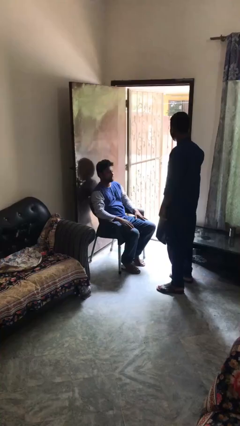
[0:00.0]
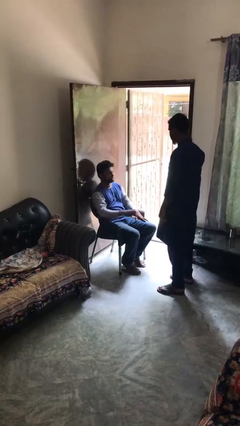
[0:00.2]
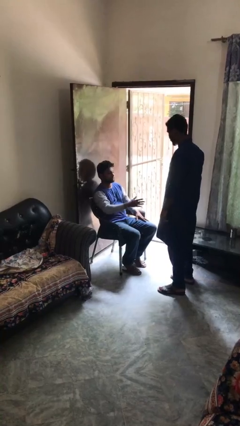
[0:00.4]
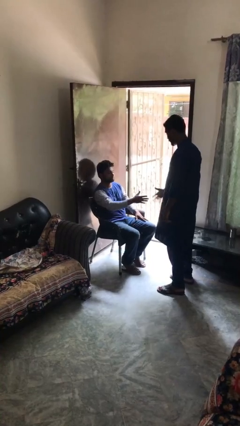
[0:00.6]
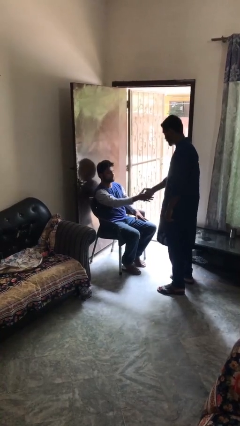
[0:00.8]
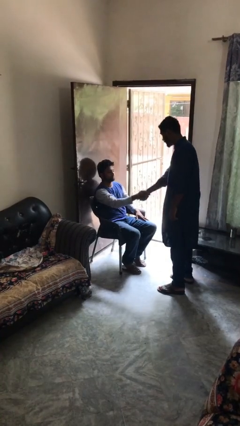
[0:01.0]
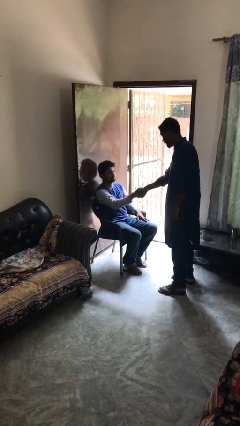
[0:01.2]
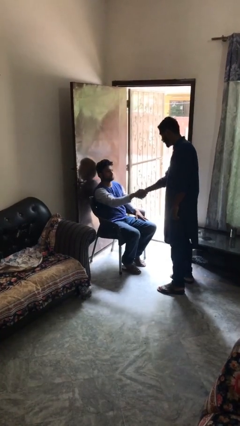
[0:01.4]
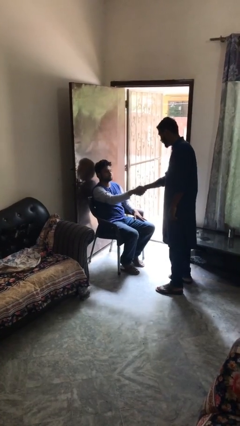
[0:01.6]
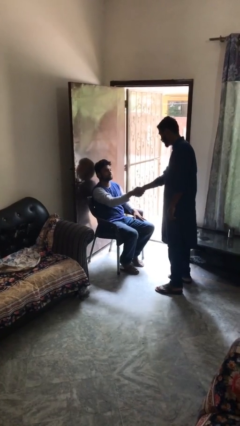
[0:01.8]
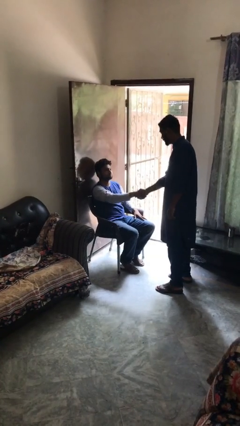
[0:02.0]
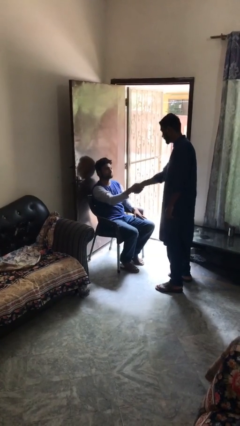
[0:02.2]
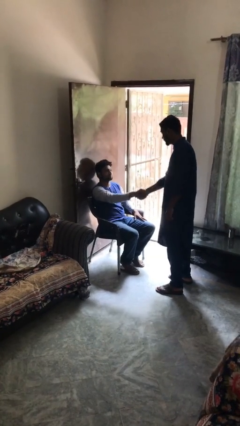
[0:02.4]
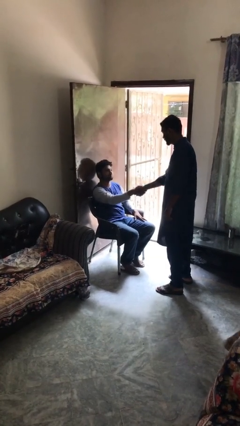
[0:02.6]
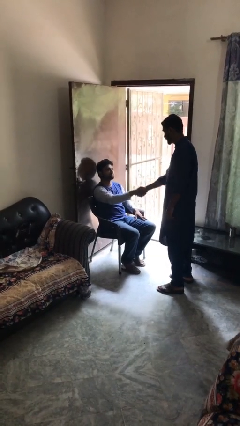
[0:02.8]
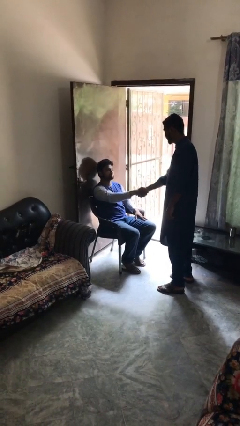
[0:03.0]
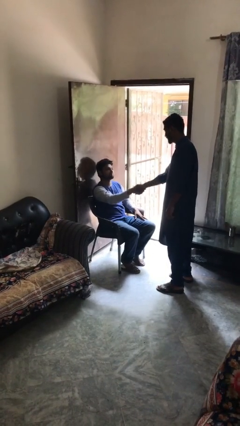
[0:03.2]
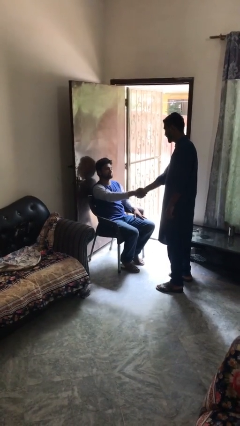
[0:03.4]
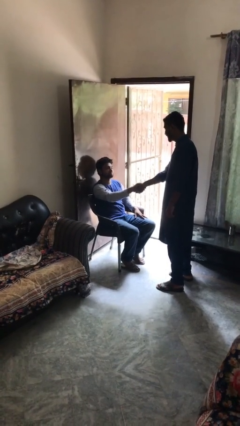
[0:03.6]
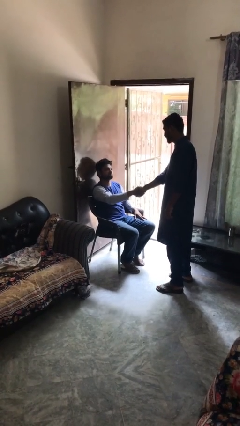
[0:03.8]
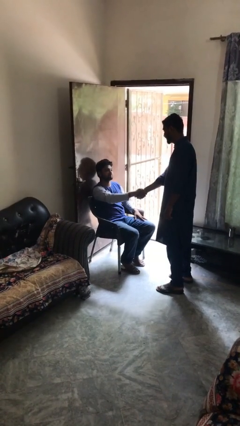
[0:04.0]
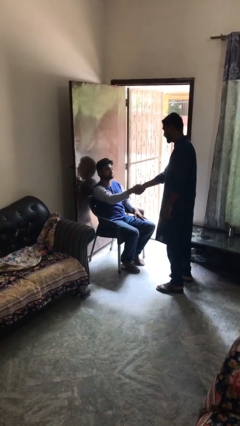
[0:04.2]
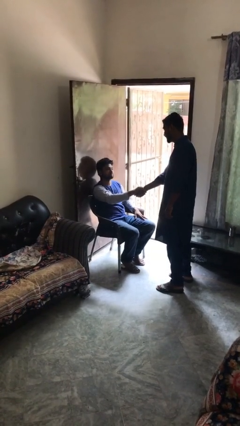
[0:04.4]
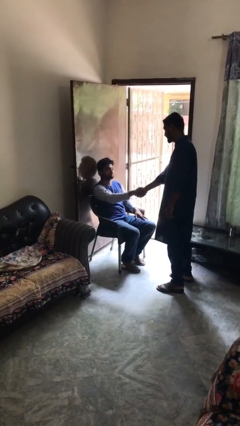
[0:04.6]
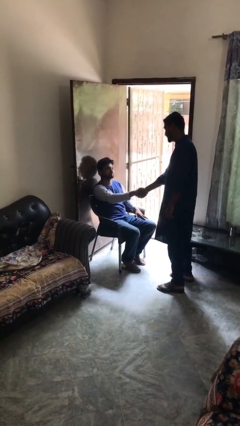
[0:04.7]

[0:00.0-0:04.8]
person holds hand

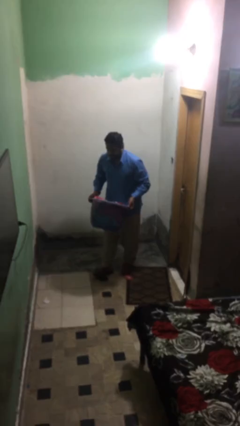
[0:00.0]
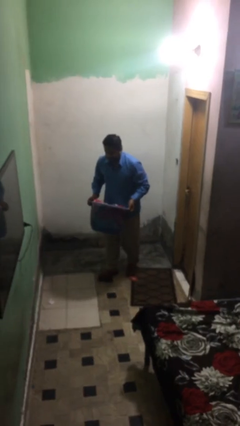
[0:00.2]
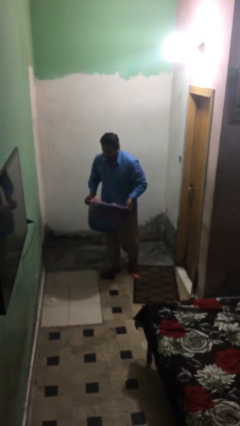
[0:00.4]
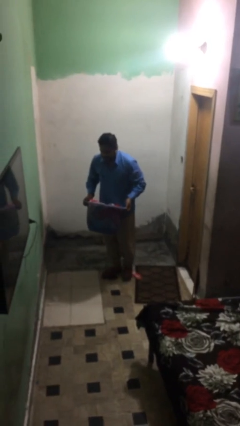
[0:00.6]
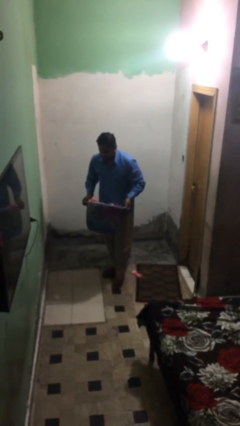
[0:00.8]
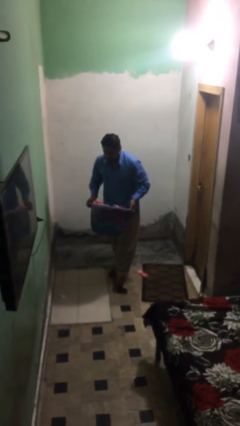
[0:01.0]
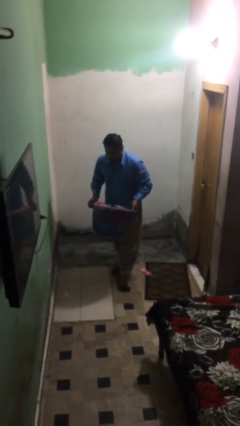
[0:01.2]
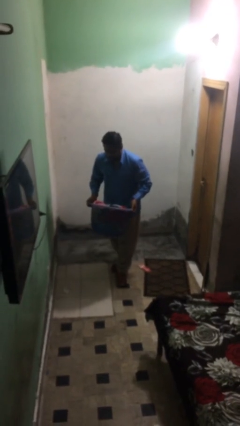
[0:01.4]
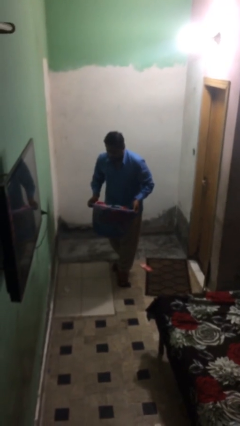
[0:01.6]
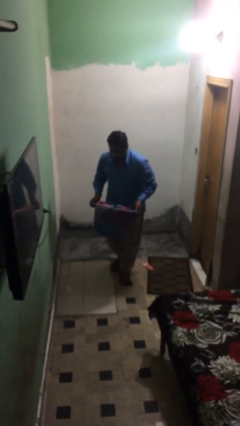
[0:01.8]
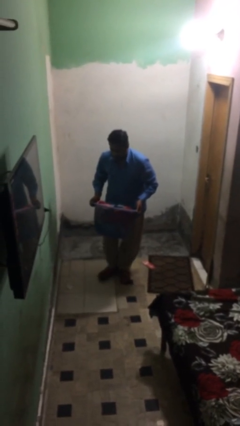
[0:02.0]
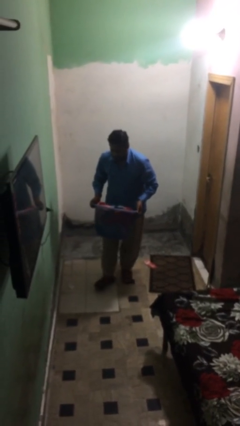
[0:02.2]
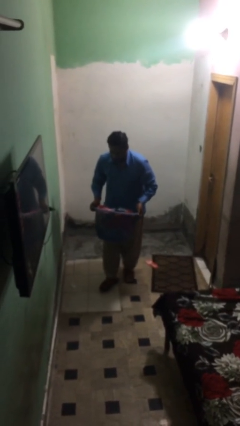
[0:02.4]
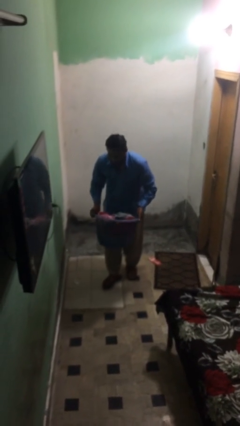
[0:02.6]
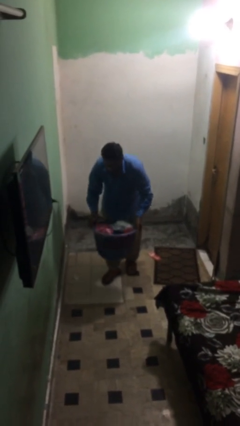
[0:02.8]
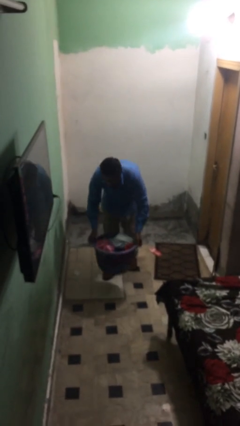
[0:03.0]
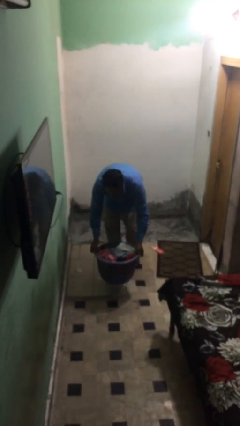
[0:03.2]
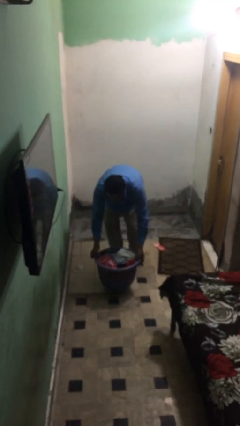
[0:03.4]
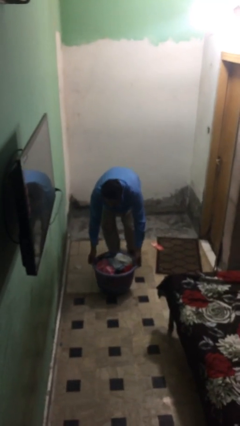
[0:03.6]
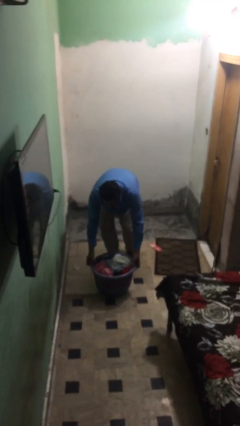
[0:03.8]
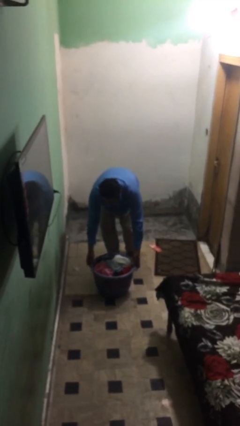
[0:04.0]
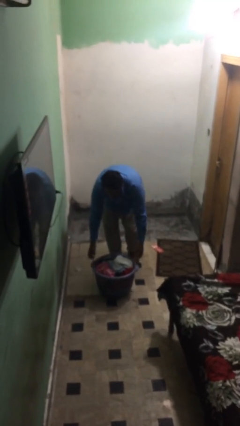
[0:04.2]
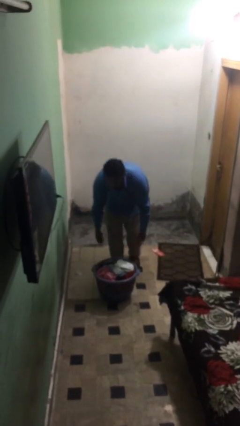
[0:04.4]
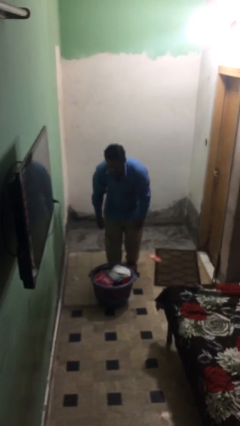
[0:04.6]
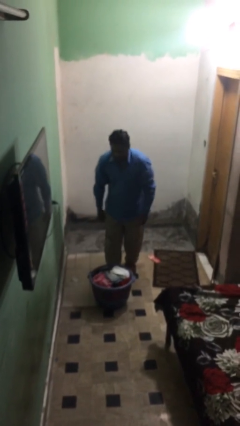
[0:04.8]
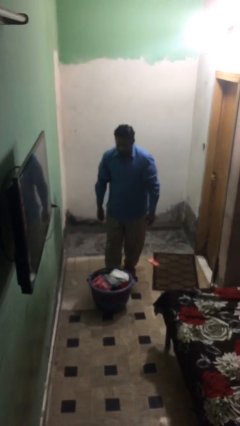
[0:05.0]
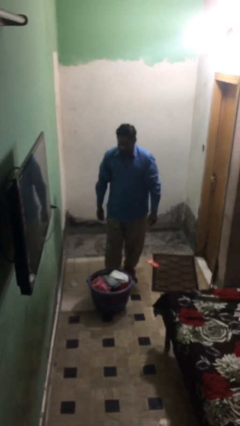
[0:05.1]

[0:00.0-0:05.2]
person puts down object on floor

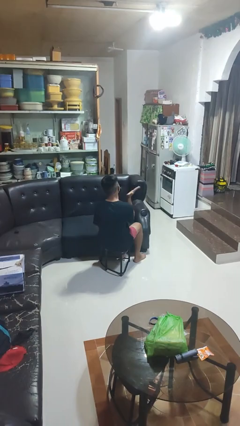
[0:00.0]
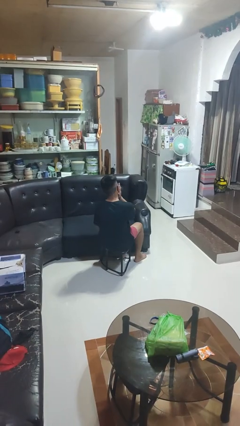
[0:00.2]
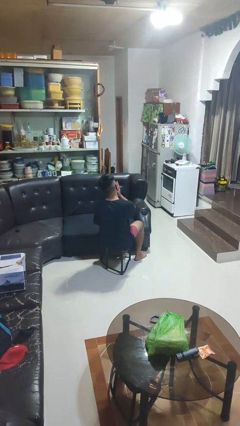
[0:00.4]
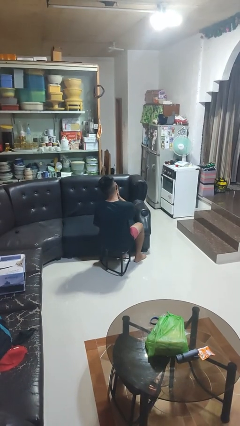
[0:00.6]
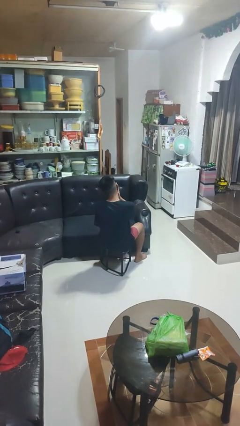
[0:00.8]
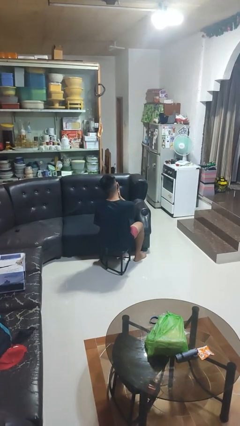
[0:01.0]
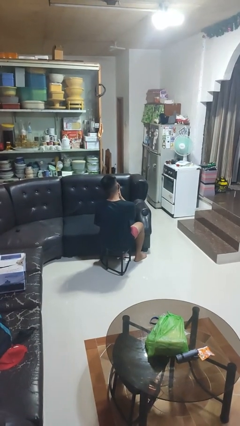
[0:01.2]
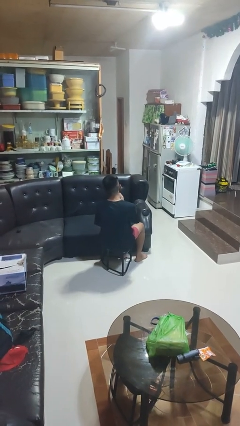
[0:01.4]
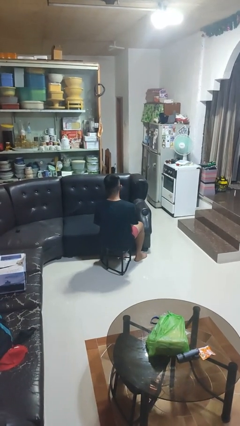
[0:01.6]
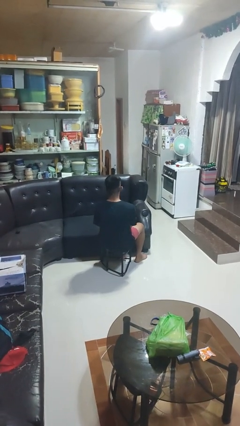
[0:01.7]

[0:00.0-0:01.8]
person swats bug

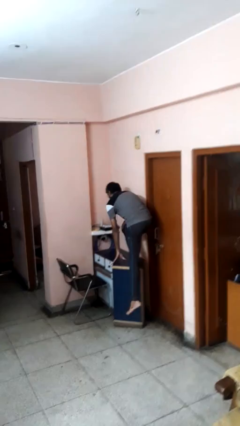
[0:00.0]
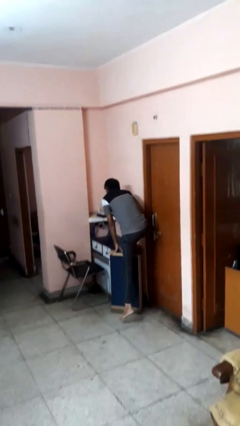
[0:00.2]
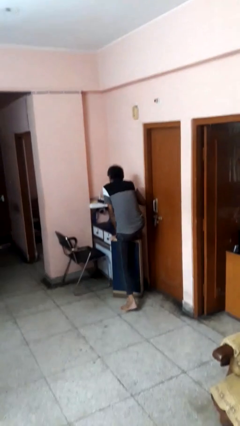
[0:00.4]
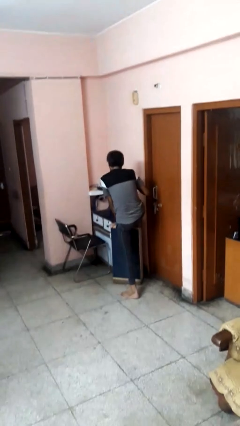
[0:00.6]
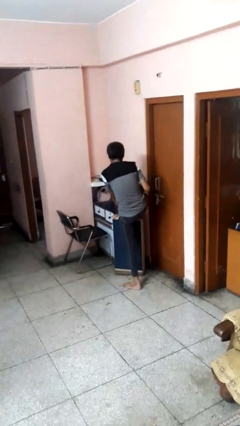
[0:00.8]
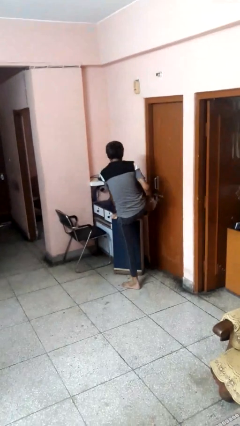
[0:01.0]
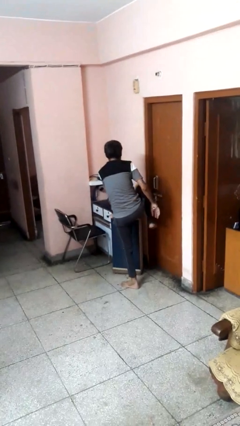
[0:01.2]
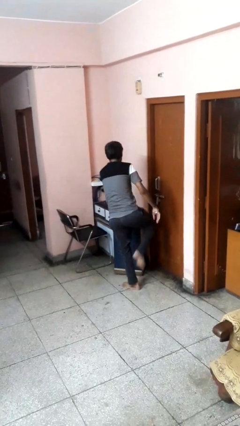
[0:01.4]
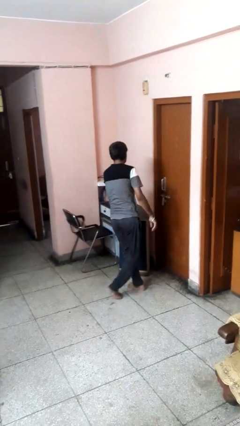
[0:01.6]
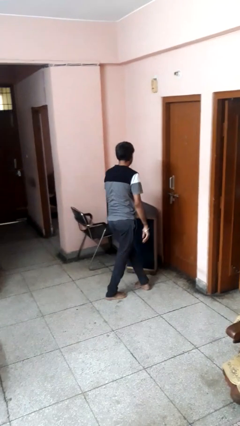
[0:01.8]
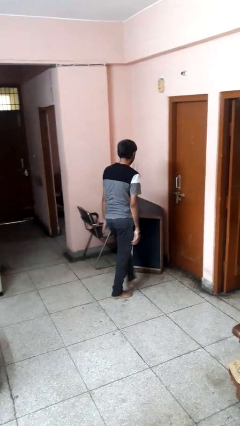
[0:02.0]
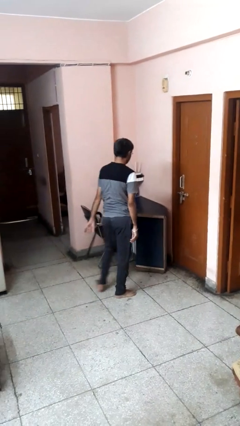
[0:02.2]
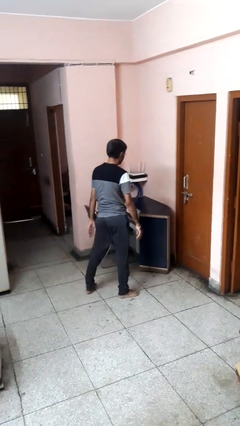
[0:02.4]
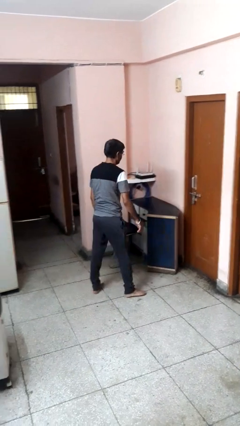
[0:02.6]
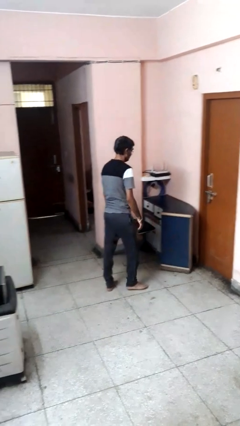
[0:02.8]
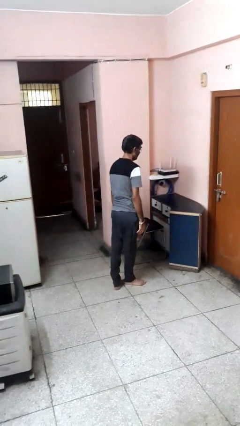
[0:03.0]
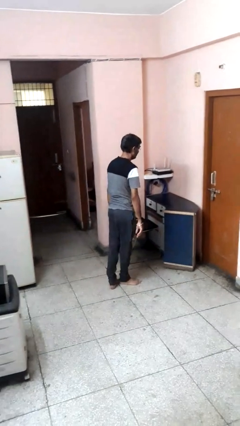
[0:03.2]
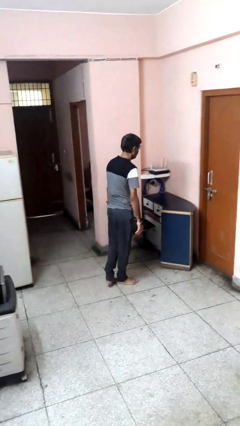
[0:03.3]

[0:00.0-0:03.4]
person climbs off table

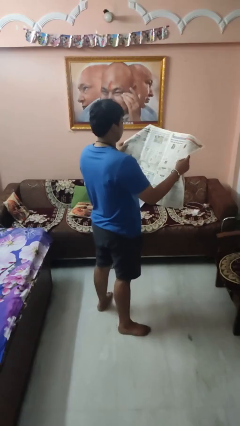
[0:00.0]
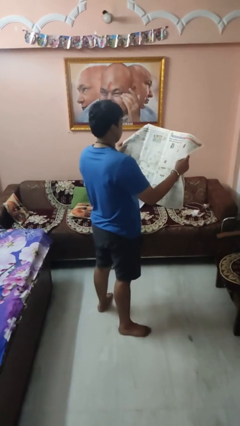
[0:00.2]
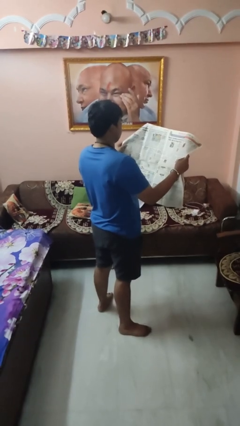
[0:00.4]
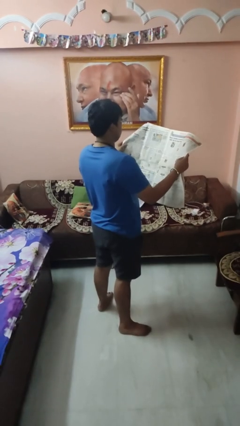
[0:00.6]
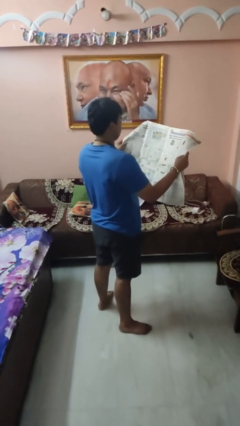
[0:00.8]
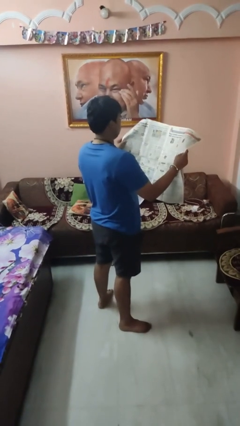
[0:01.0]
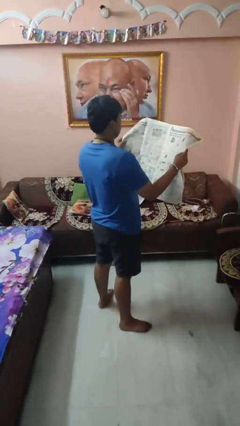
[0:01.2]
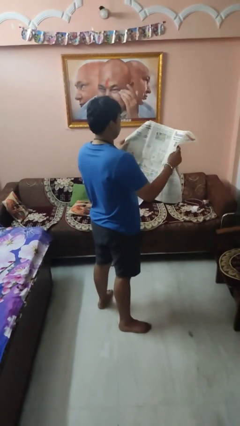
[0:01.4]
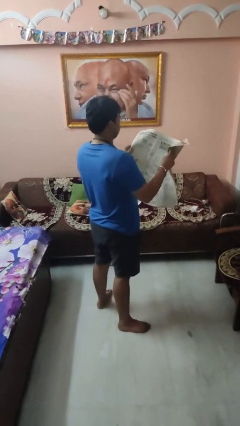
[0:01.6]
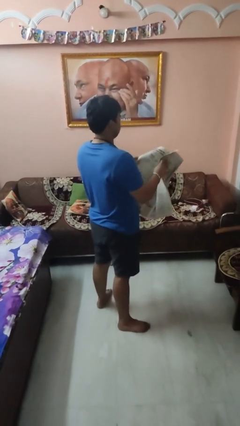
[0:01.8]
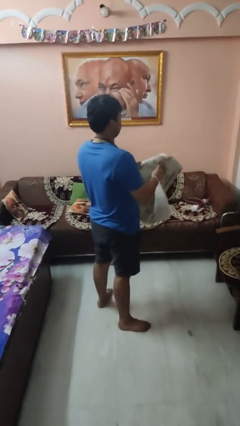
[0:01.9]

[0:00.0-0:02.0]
person reads newspaper
